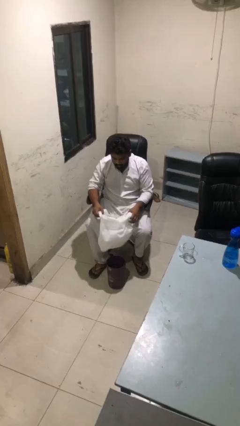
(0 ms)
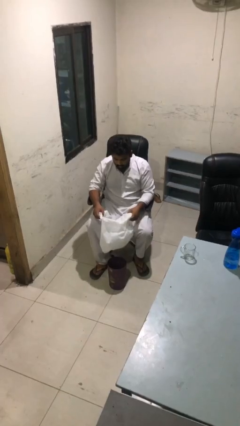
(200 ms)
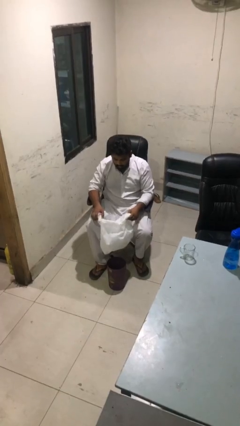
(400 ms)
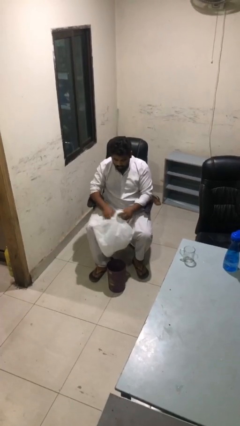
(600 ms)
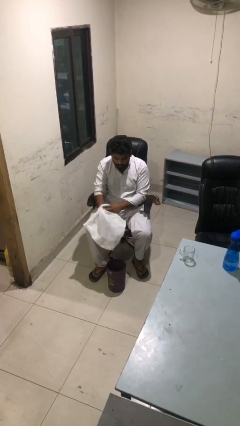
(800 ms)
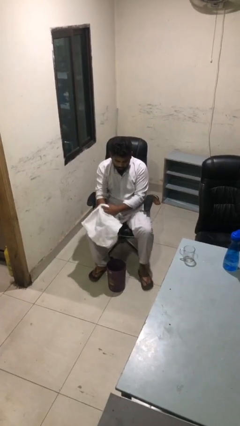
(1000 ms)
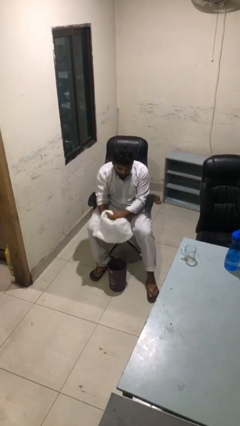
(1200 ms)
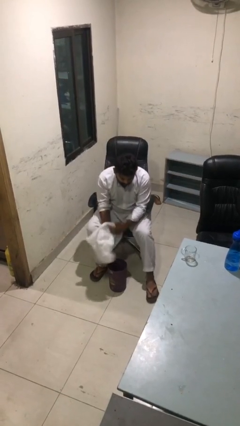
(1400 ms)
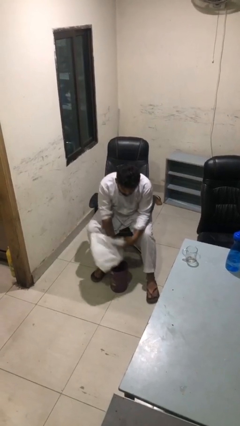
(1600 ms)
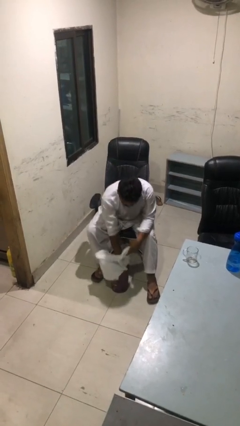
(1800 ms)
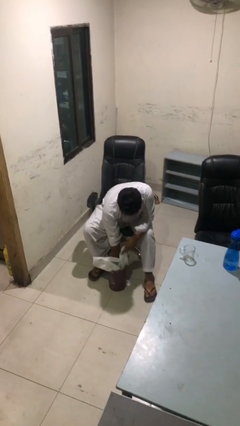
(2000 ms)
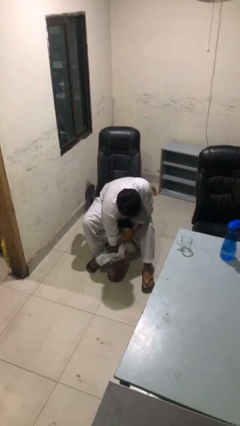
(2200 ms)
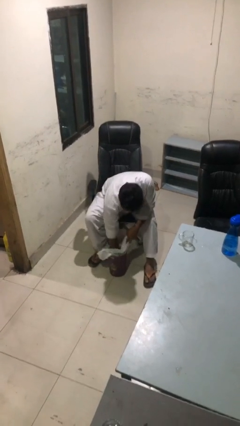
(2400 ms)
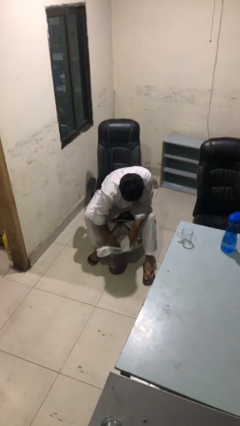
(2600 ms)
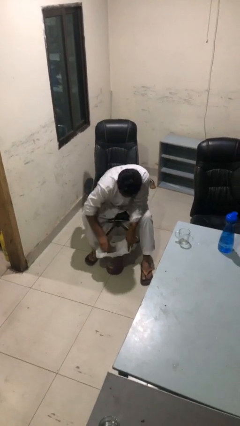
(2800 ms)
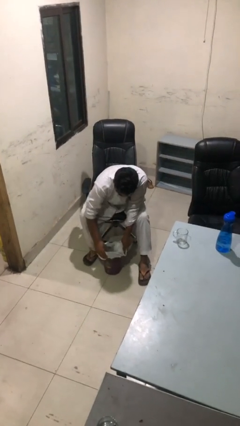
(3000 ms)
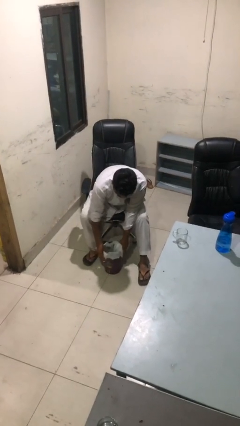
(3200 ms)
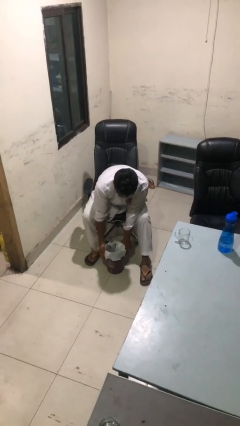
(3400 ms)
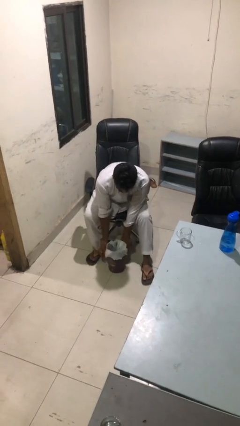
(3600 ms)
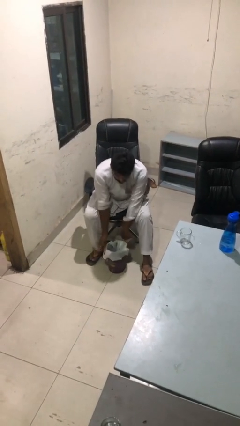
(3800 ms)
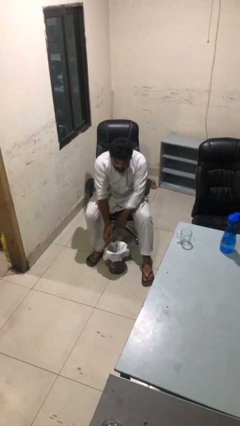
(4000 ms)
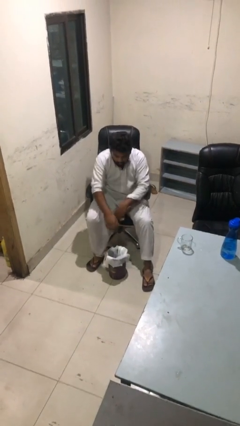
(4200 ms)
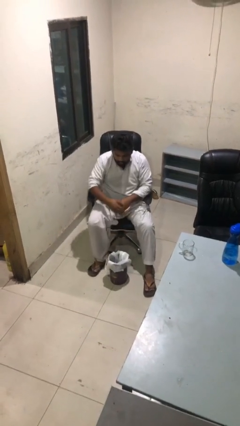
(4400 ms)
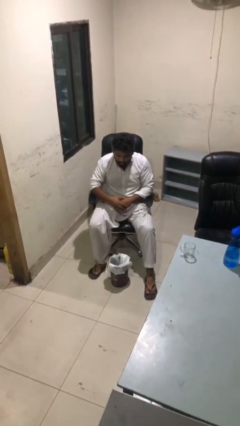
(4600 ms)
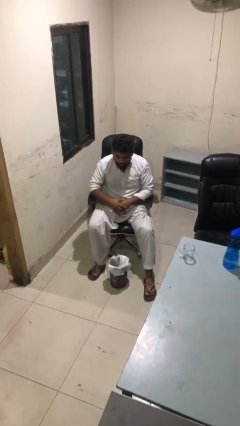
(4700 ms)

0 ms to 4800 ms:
person inserts trashbag into trashcan

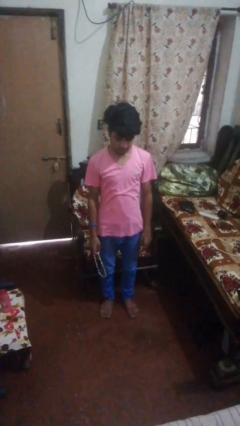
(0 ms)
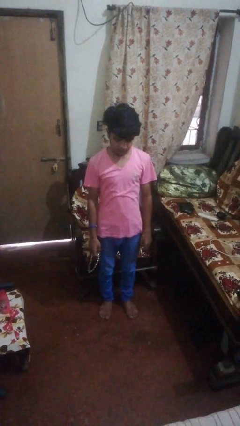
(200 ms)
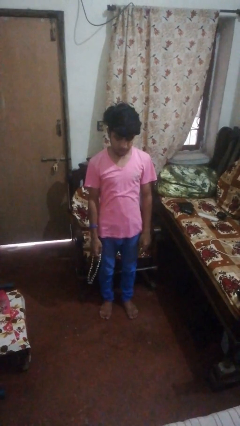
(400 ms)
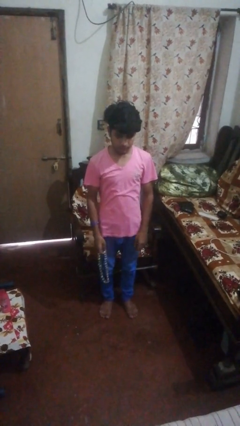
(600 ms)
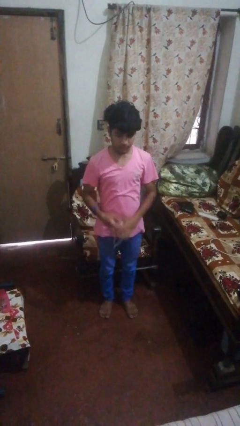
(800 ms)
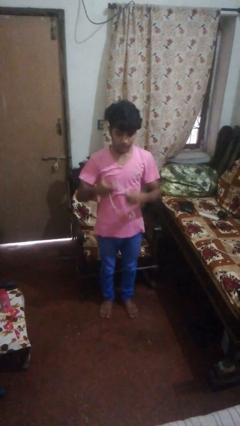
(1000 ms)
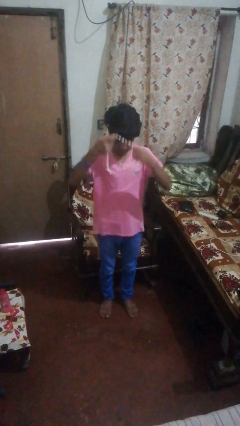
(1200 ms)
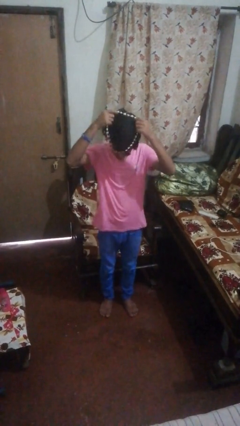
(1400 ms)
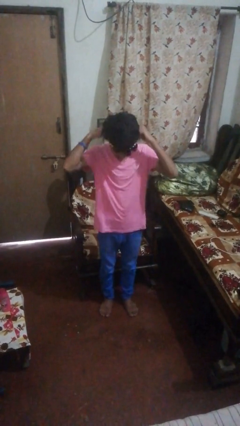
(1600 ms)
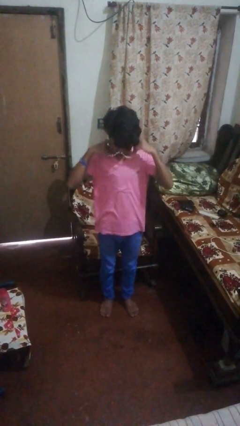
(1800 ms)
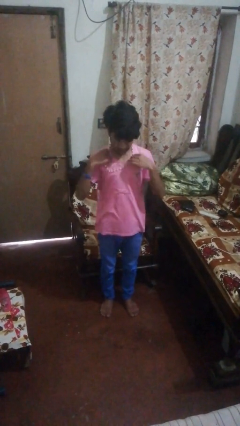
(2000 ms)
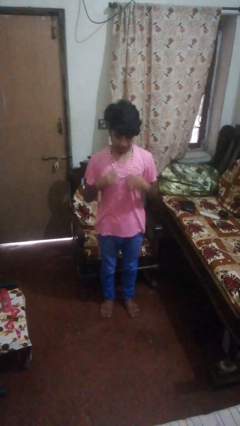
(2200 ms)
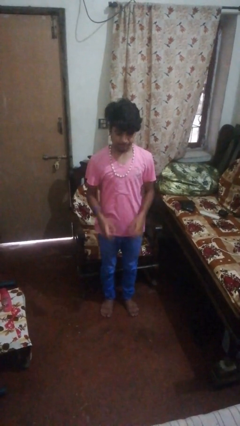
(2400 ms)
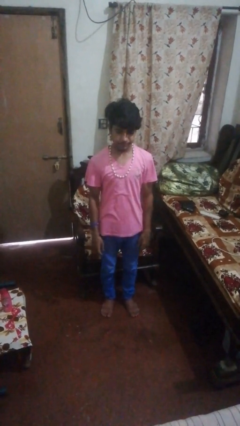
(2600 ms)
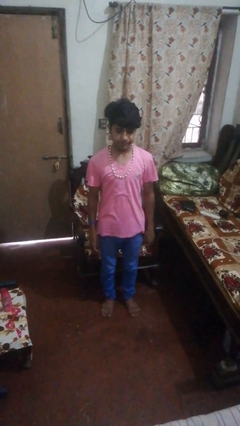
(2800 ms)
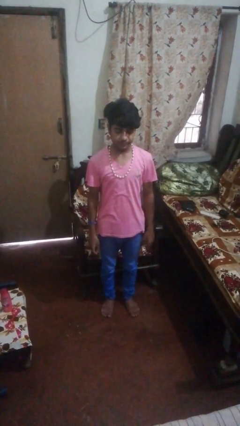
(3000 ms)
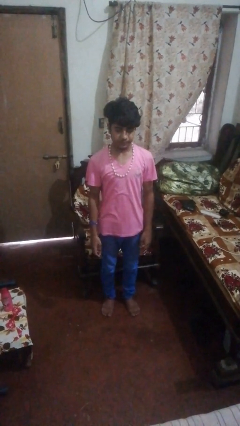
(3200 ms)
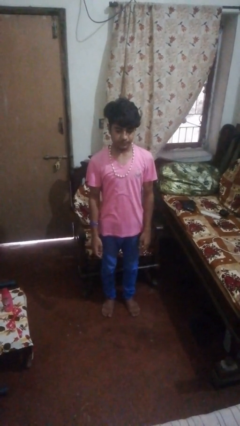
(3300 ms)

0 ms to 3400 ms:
person puts on necklace

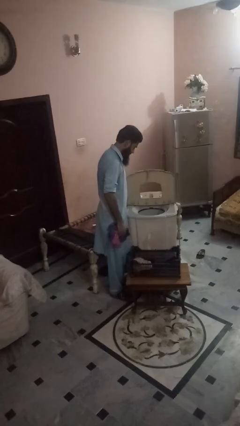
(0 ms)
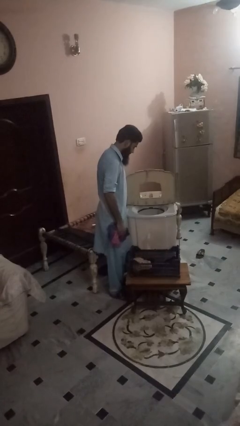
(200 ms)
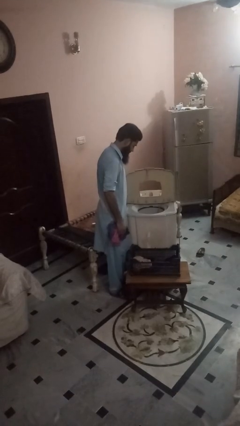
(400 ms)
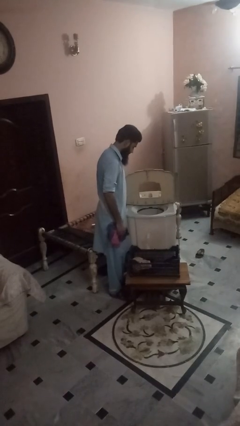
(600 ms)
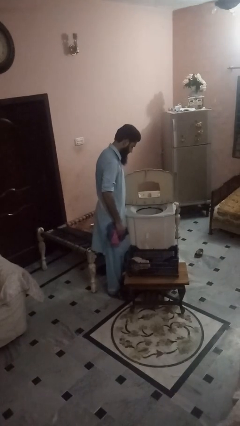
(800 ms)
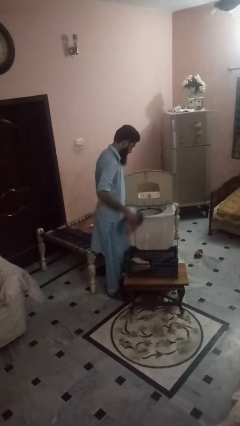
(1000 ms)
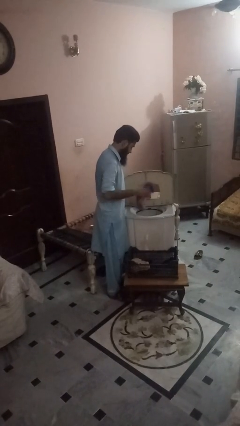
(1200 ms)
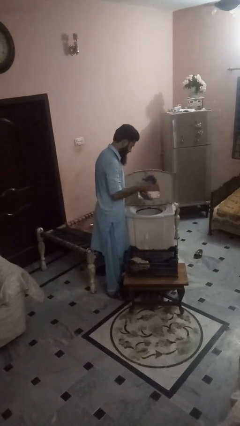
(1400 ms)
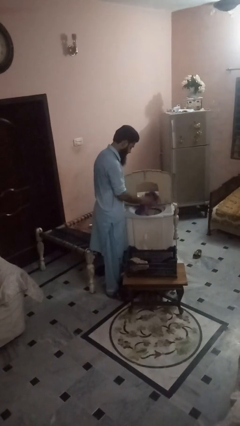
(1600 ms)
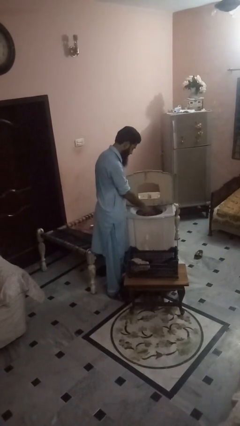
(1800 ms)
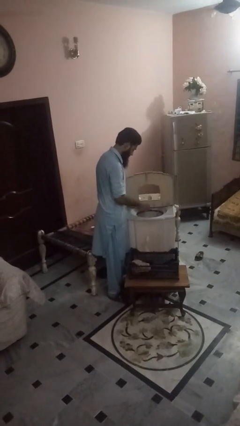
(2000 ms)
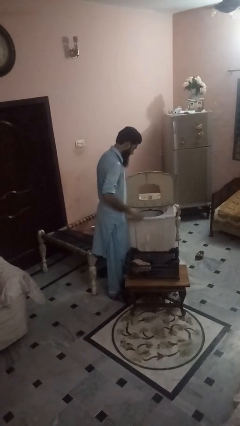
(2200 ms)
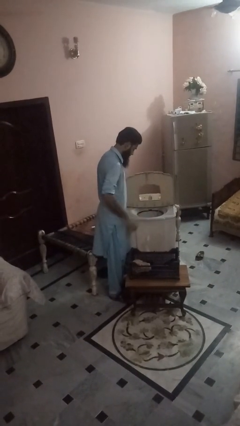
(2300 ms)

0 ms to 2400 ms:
person loads dishwasher

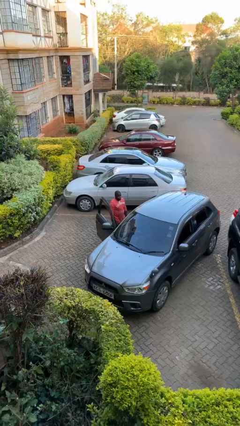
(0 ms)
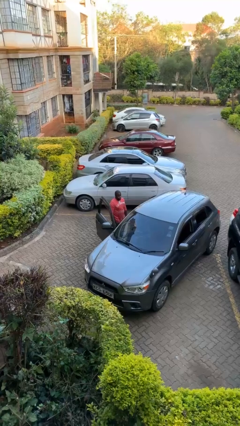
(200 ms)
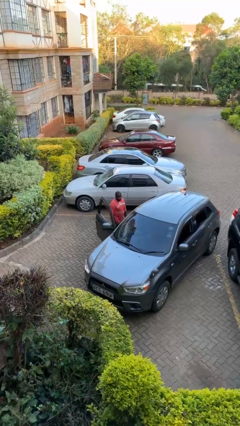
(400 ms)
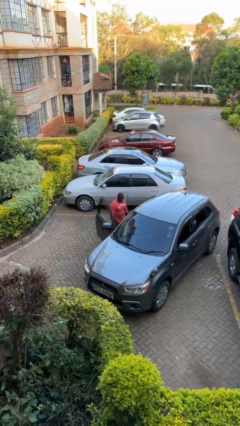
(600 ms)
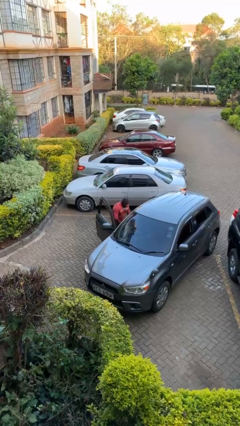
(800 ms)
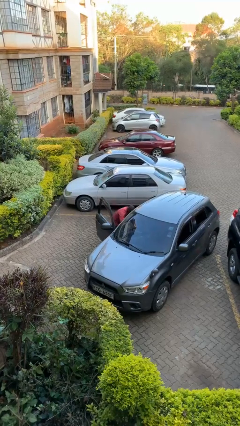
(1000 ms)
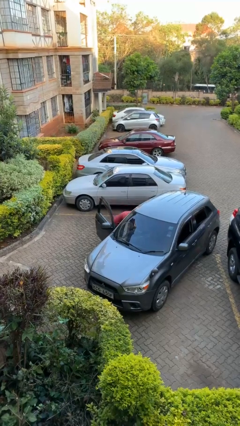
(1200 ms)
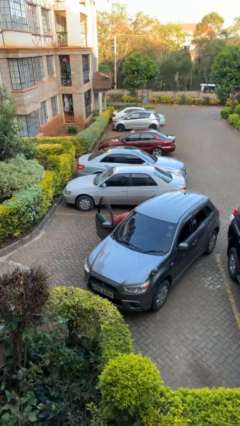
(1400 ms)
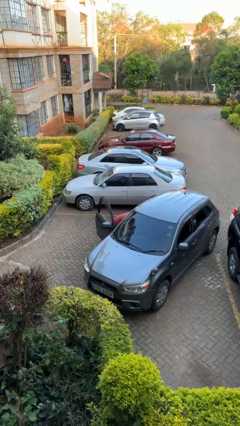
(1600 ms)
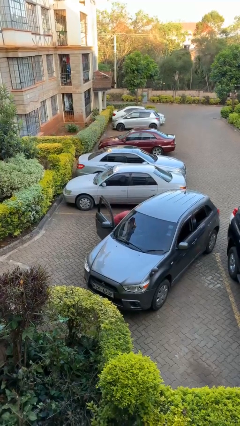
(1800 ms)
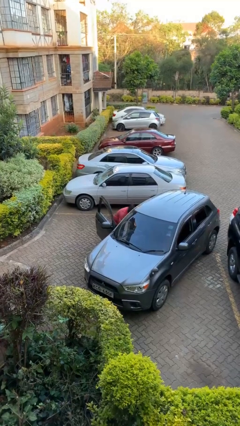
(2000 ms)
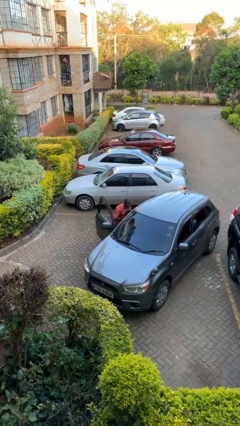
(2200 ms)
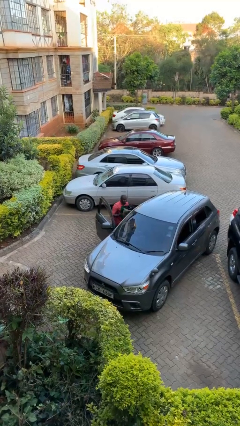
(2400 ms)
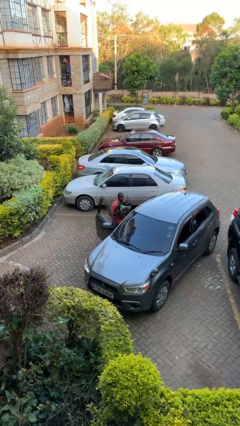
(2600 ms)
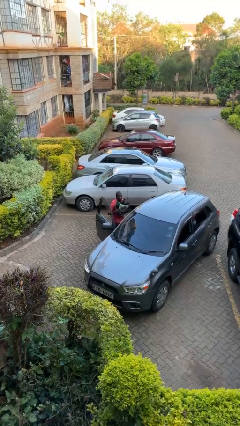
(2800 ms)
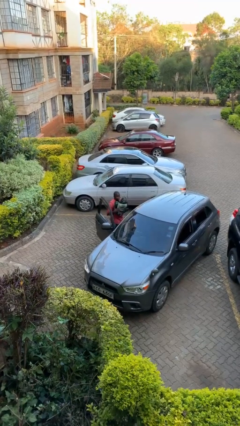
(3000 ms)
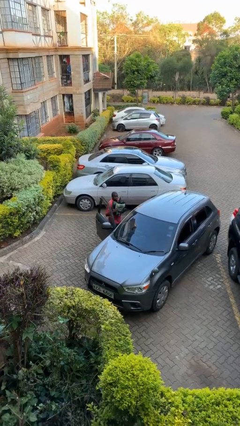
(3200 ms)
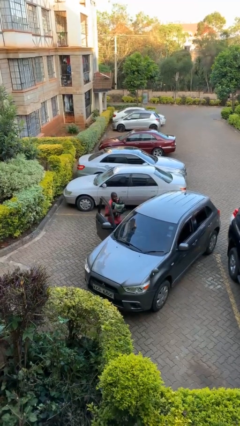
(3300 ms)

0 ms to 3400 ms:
person unloads car

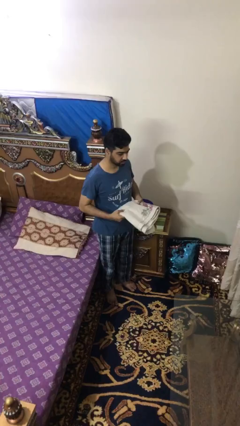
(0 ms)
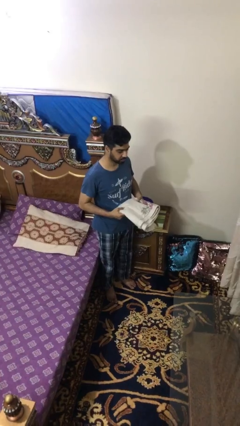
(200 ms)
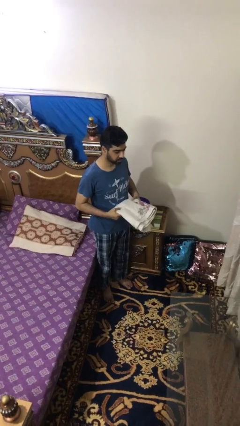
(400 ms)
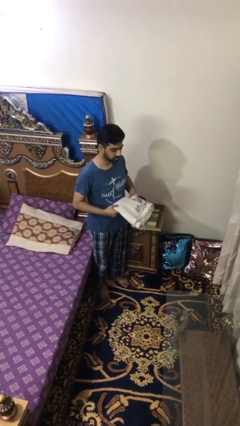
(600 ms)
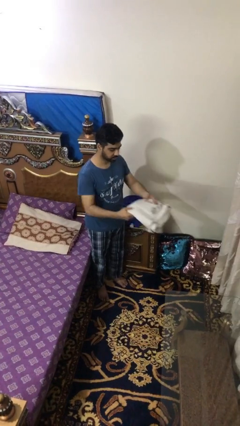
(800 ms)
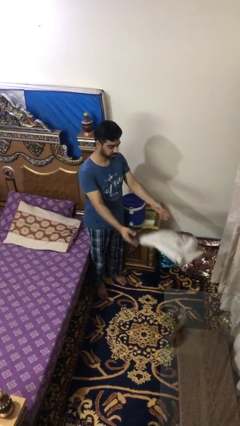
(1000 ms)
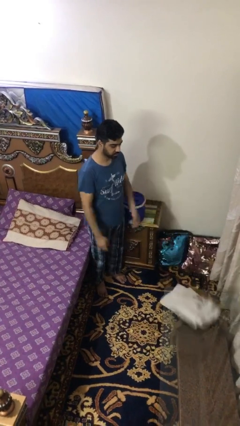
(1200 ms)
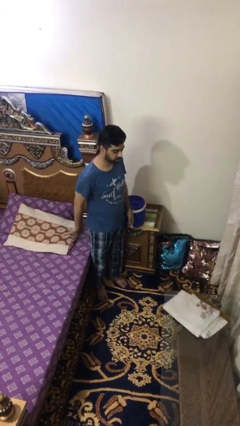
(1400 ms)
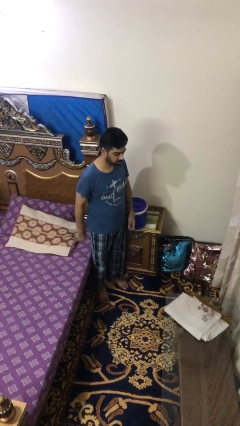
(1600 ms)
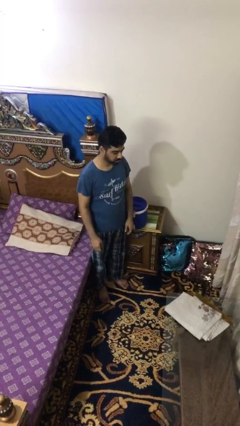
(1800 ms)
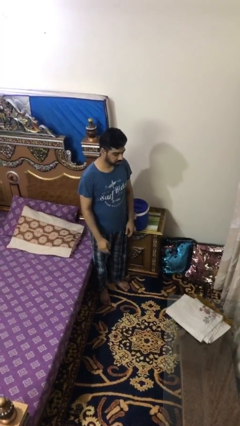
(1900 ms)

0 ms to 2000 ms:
person throws object on table

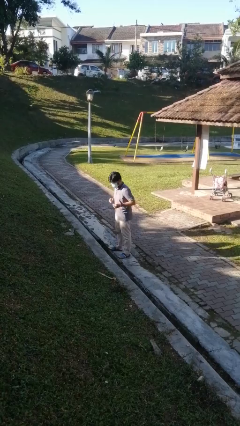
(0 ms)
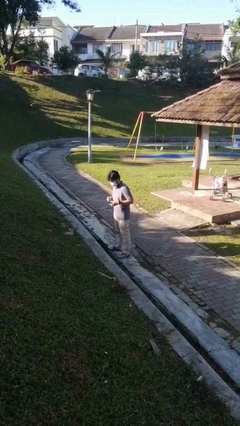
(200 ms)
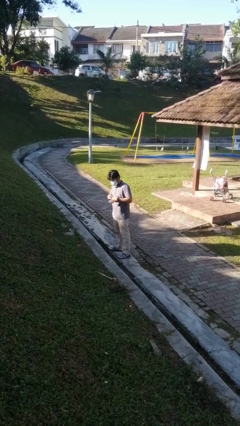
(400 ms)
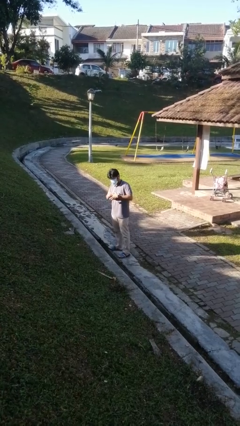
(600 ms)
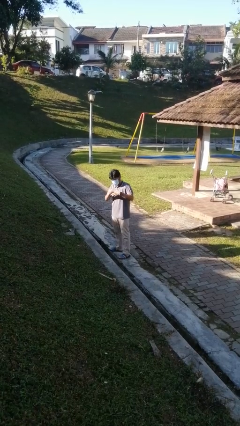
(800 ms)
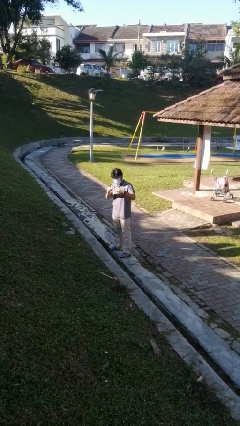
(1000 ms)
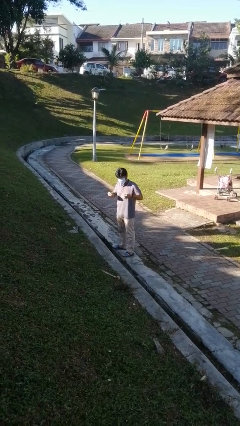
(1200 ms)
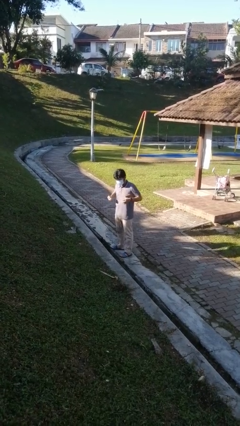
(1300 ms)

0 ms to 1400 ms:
person takes off ring

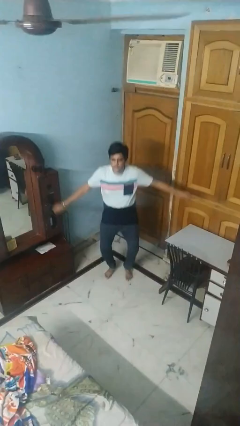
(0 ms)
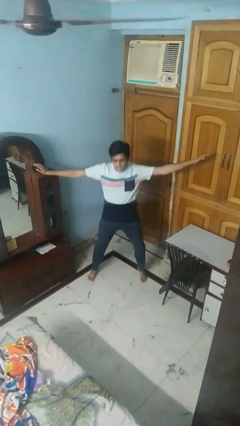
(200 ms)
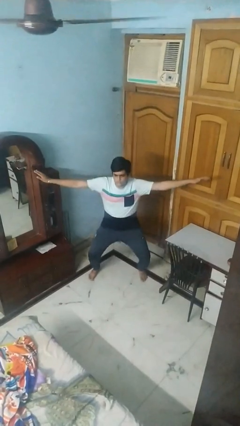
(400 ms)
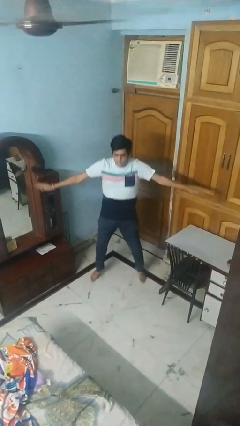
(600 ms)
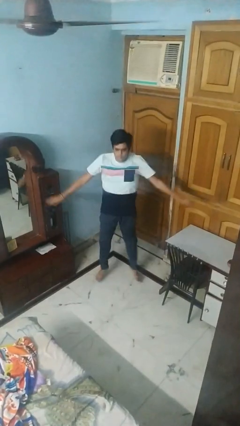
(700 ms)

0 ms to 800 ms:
person exercises with jumping jacks
